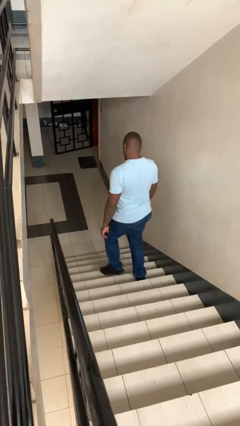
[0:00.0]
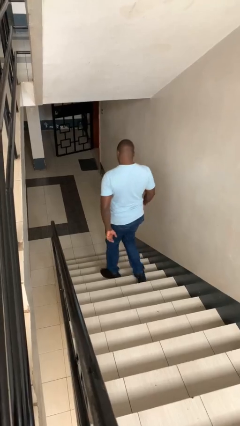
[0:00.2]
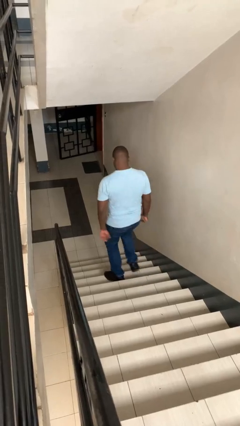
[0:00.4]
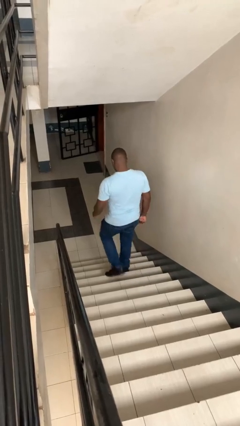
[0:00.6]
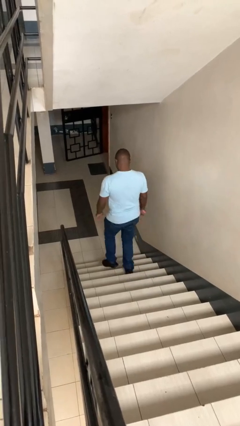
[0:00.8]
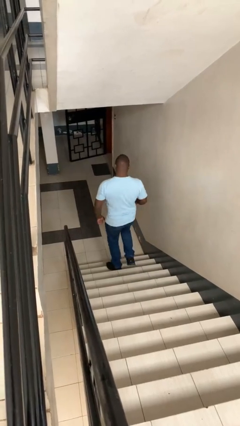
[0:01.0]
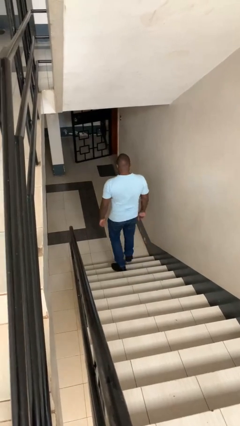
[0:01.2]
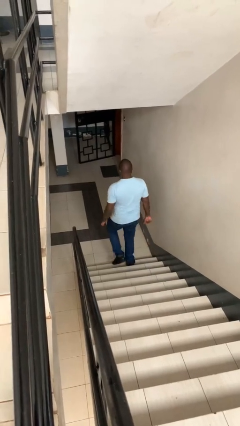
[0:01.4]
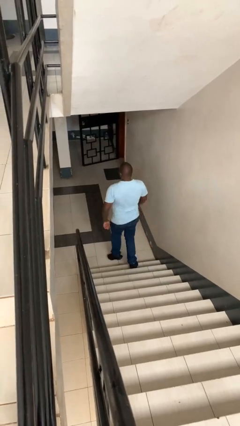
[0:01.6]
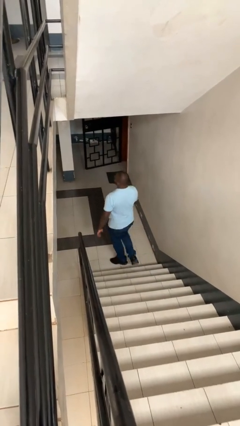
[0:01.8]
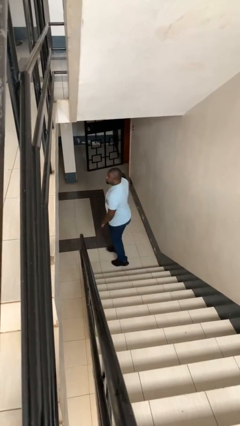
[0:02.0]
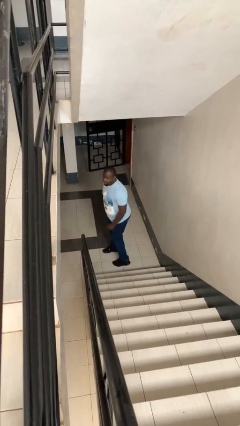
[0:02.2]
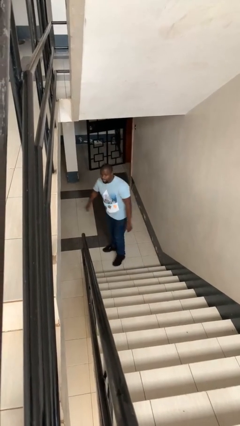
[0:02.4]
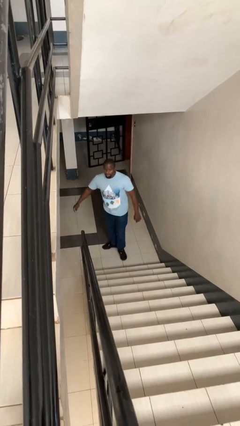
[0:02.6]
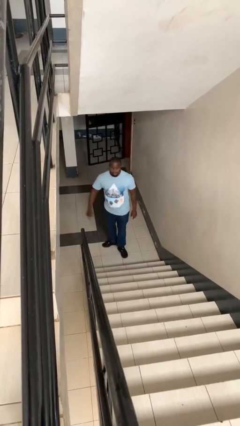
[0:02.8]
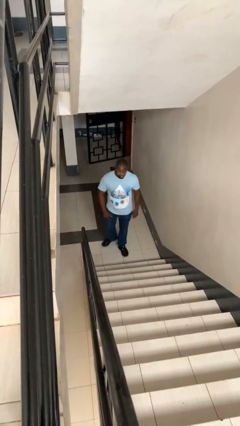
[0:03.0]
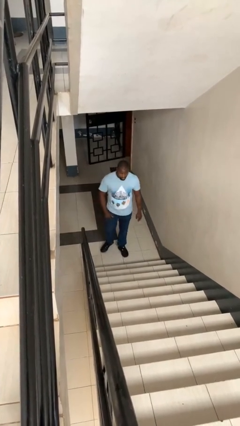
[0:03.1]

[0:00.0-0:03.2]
person climbs down stairs

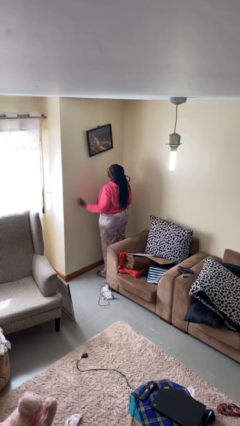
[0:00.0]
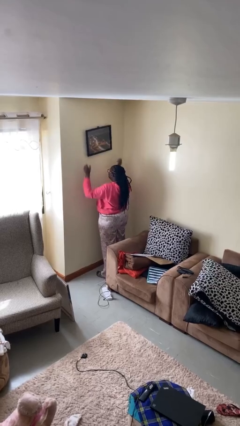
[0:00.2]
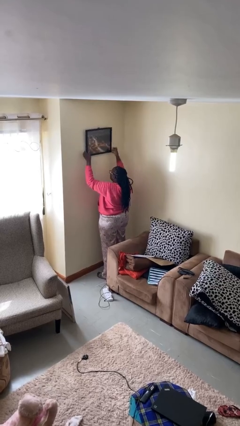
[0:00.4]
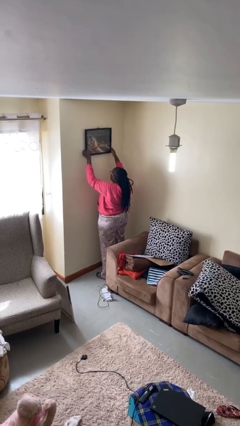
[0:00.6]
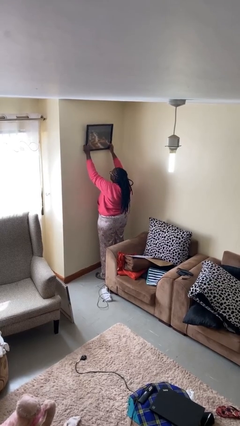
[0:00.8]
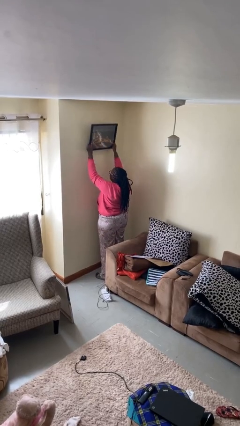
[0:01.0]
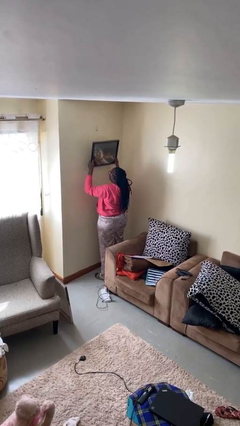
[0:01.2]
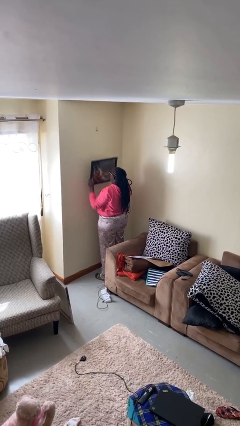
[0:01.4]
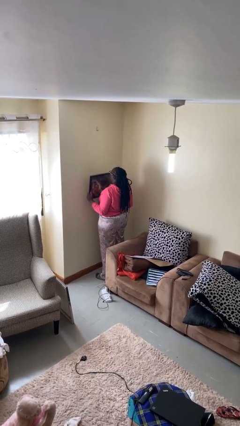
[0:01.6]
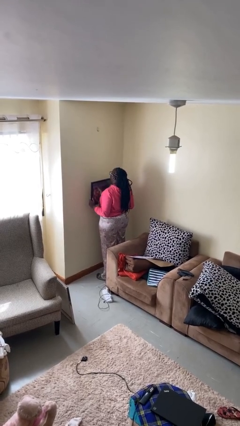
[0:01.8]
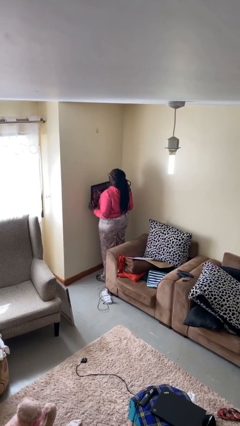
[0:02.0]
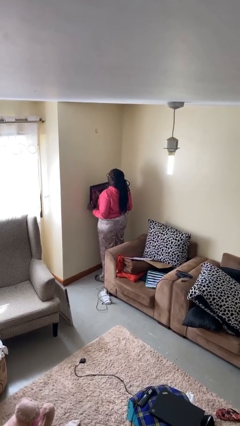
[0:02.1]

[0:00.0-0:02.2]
person takes down picture frame

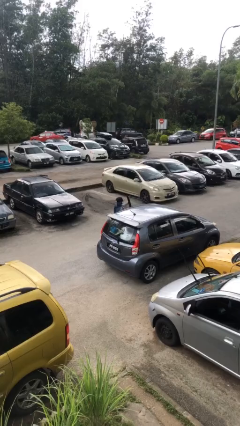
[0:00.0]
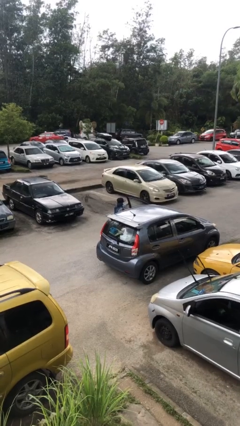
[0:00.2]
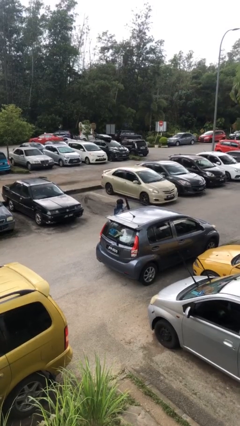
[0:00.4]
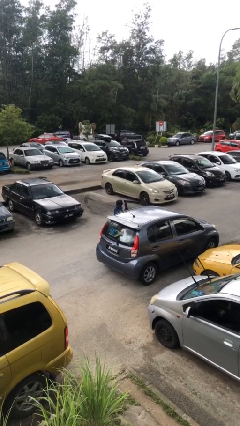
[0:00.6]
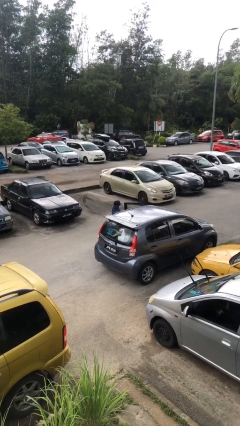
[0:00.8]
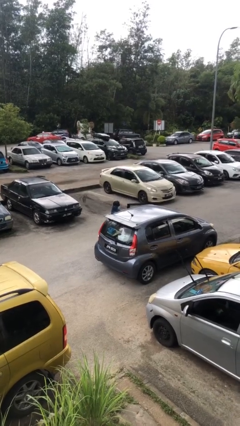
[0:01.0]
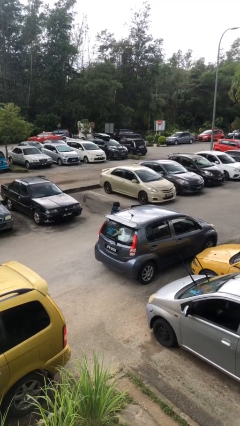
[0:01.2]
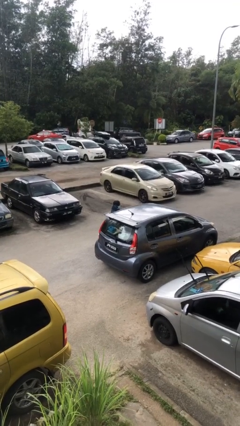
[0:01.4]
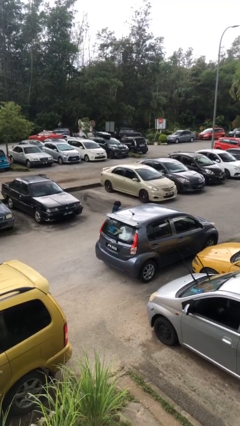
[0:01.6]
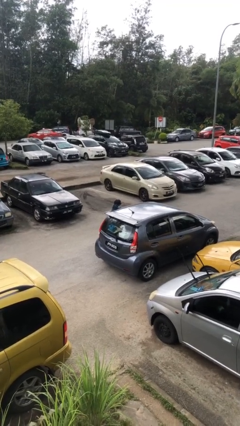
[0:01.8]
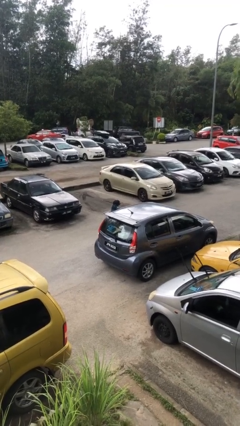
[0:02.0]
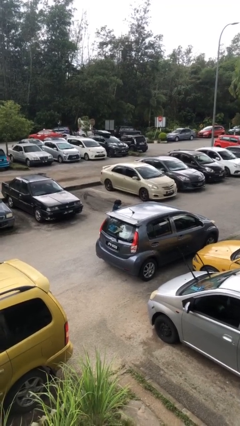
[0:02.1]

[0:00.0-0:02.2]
person closes car door

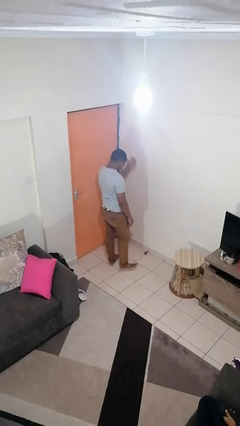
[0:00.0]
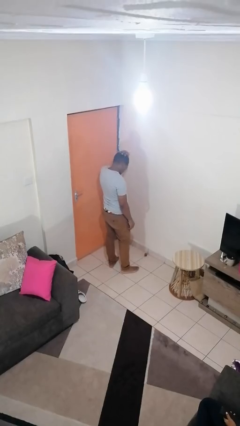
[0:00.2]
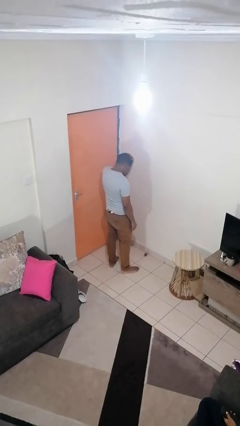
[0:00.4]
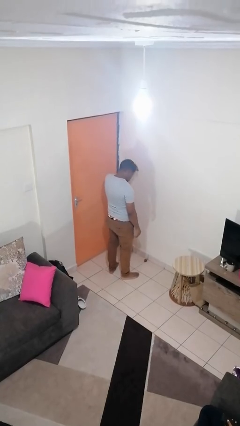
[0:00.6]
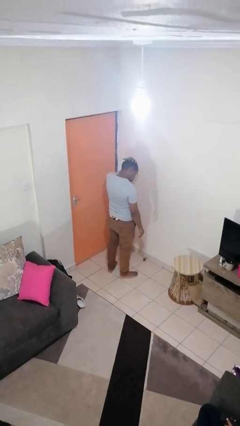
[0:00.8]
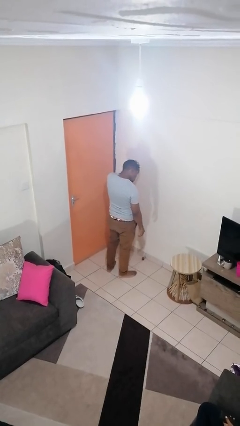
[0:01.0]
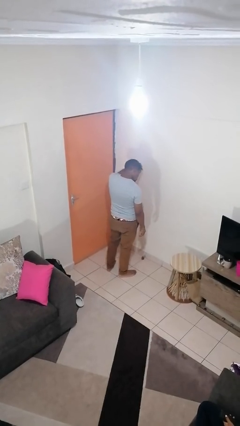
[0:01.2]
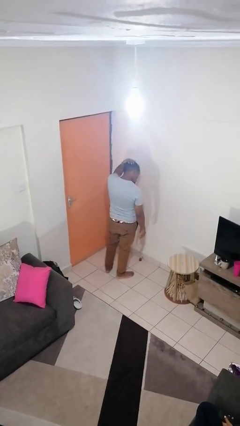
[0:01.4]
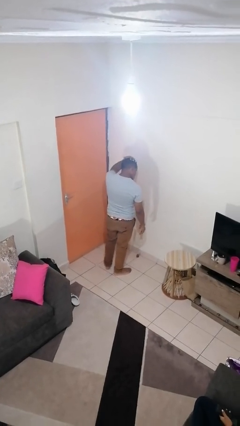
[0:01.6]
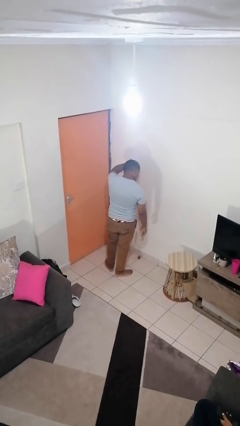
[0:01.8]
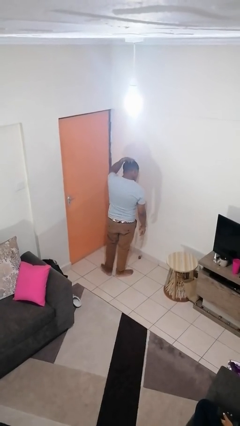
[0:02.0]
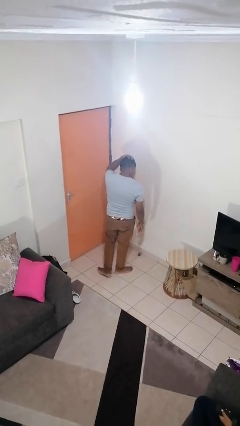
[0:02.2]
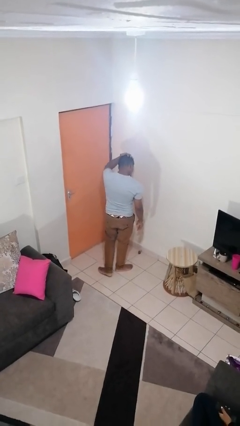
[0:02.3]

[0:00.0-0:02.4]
person strokes hair

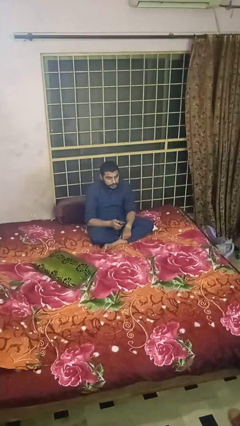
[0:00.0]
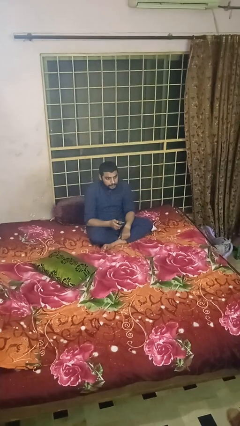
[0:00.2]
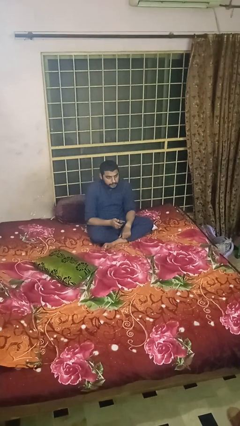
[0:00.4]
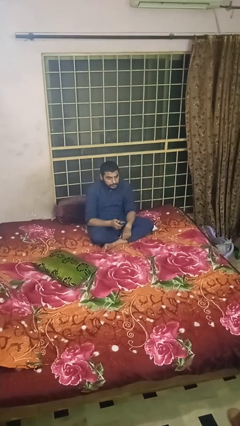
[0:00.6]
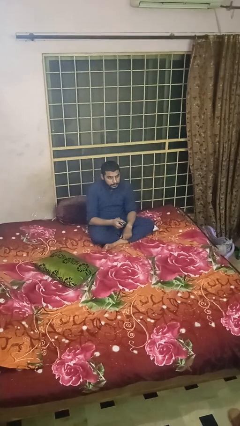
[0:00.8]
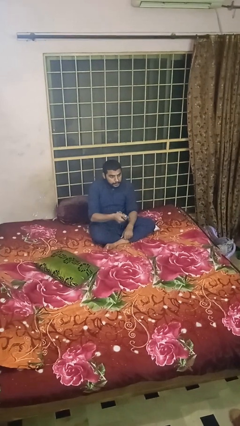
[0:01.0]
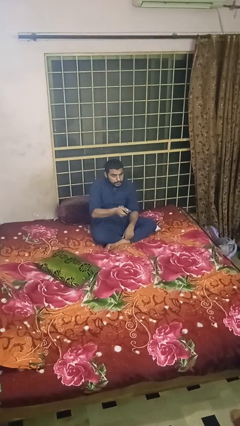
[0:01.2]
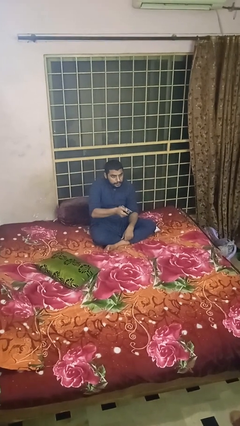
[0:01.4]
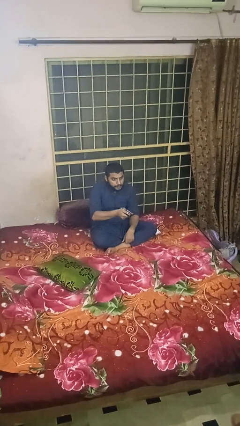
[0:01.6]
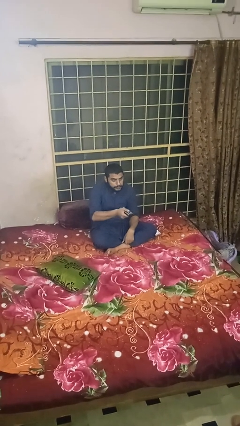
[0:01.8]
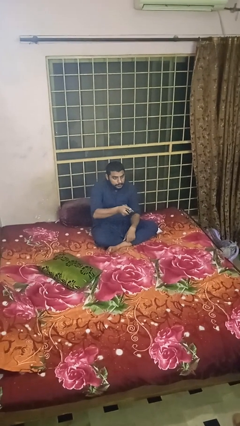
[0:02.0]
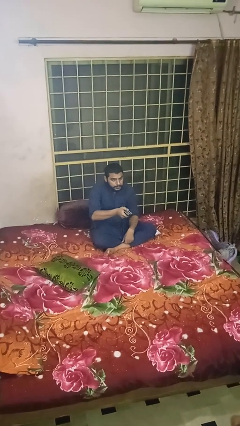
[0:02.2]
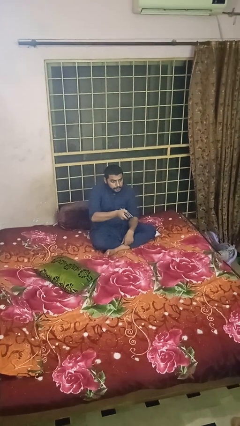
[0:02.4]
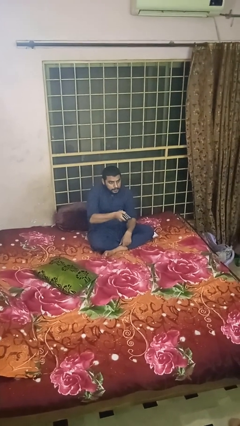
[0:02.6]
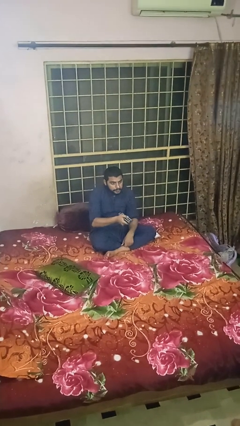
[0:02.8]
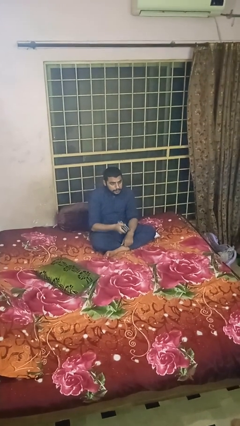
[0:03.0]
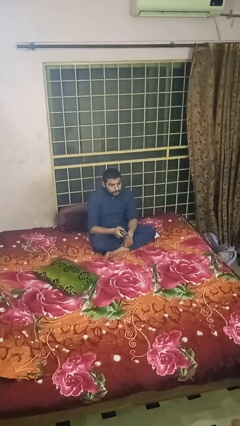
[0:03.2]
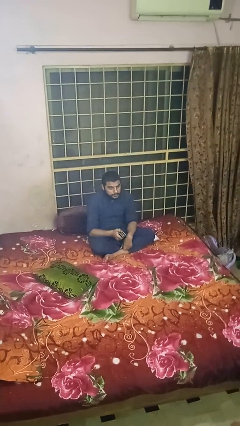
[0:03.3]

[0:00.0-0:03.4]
person uses television remote

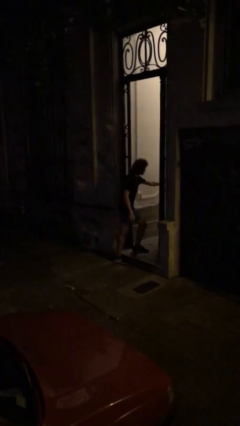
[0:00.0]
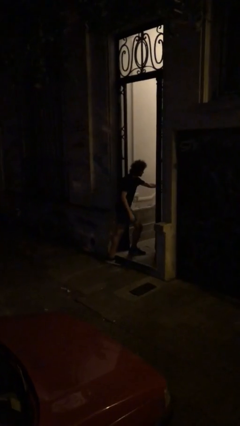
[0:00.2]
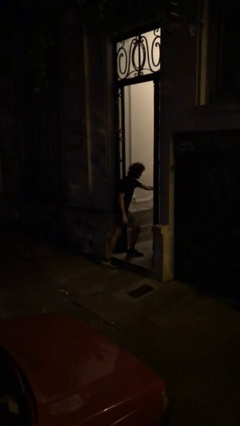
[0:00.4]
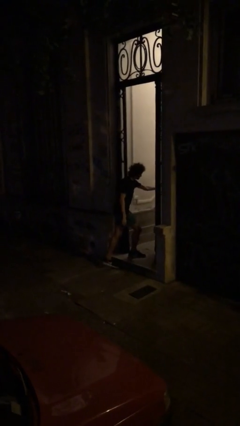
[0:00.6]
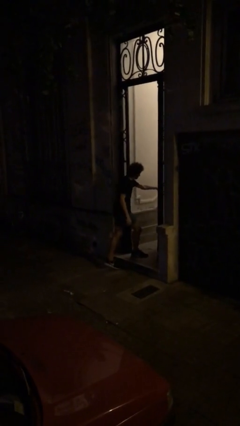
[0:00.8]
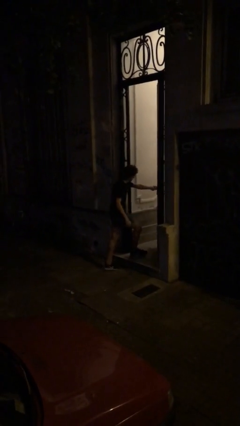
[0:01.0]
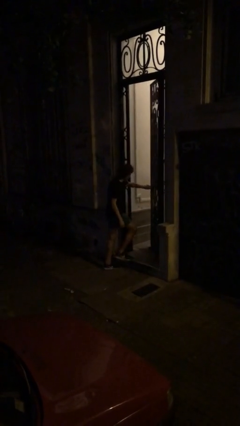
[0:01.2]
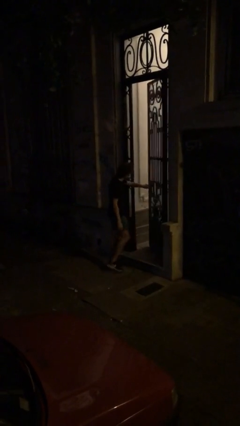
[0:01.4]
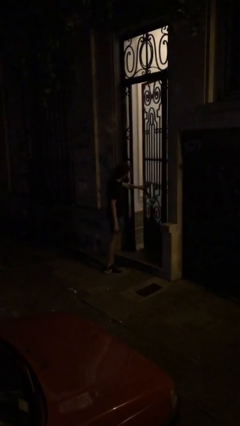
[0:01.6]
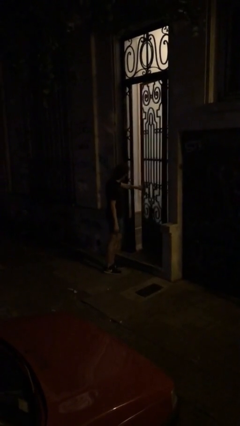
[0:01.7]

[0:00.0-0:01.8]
person closes facility door

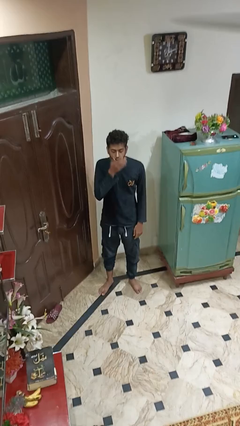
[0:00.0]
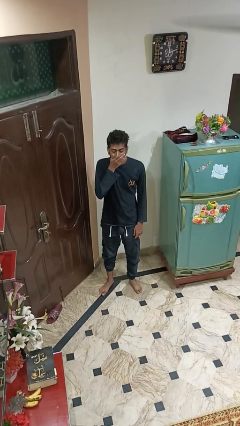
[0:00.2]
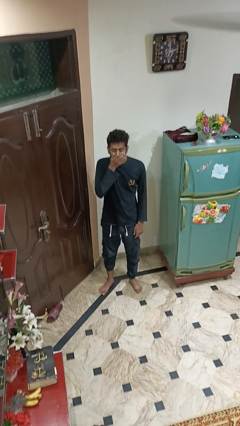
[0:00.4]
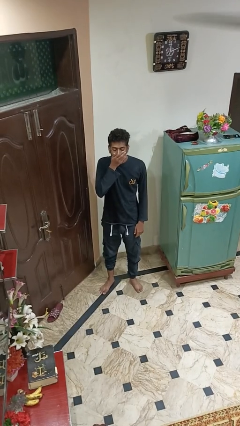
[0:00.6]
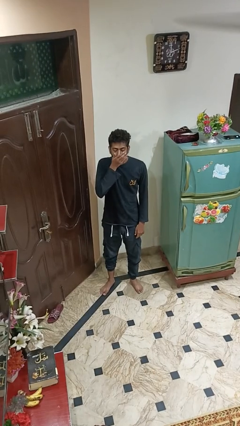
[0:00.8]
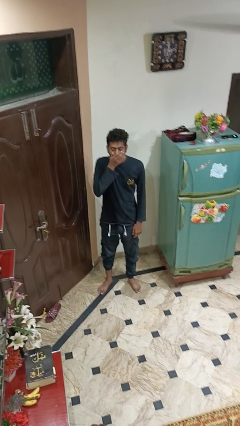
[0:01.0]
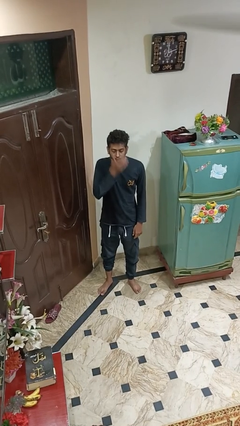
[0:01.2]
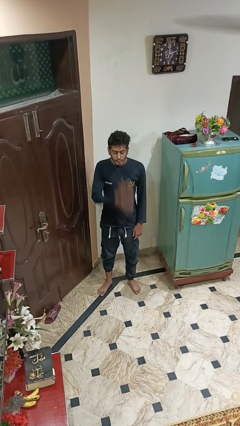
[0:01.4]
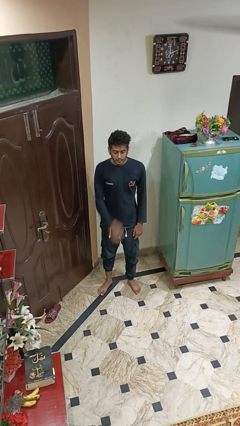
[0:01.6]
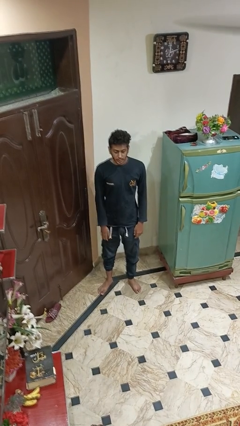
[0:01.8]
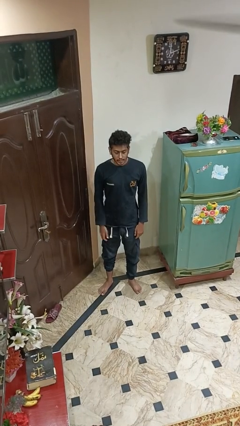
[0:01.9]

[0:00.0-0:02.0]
person yawns
